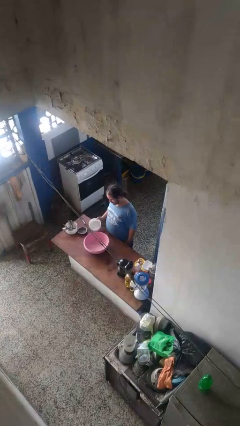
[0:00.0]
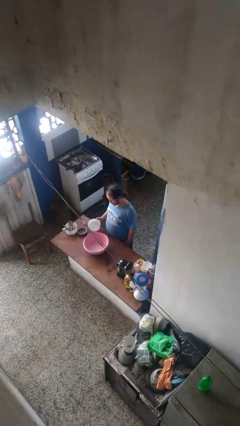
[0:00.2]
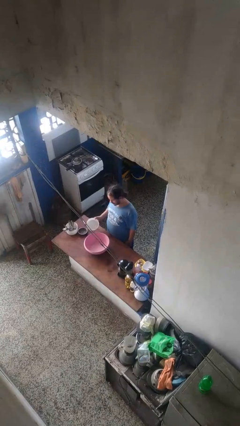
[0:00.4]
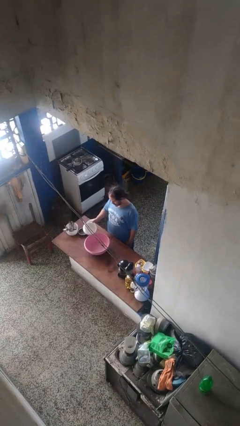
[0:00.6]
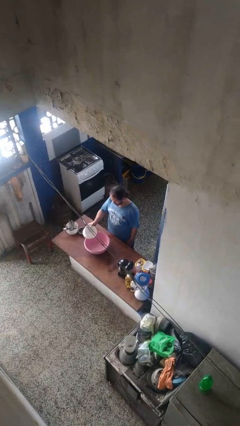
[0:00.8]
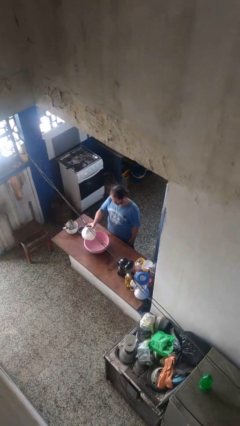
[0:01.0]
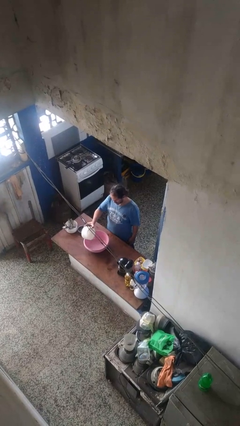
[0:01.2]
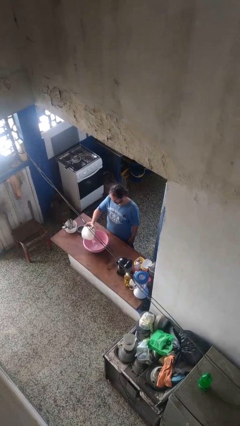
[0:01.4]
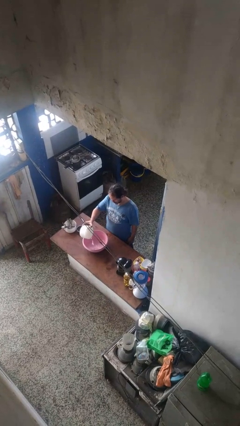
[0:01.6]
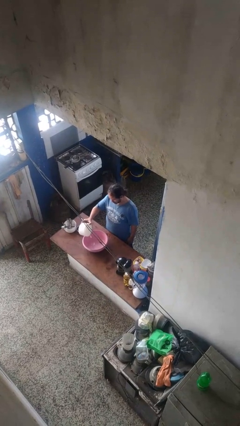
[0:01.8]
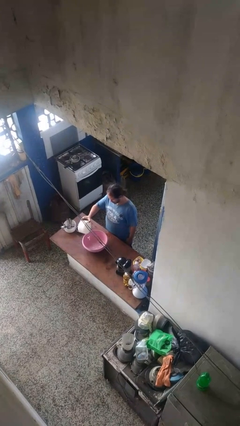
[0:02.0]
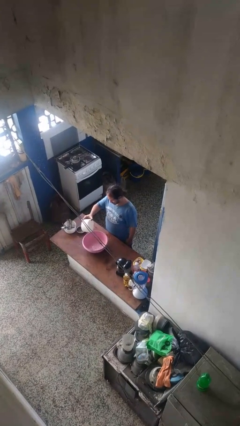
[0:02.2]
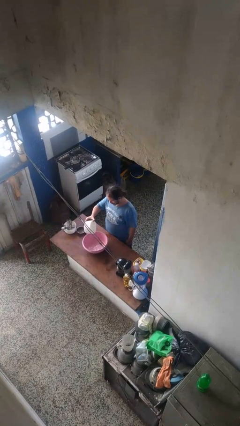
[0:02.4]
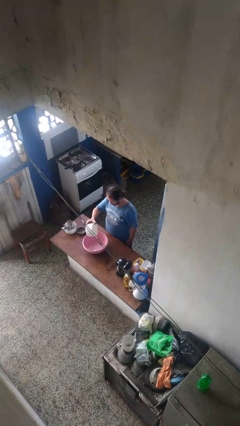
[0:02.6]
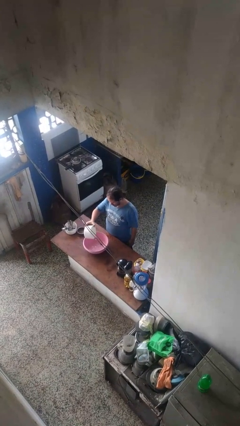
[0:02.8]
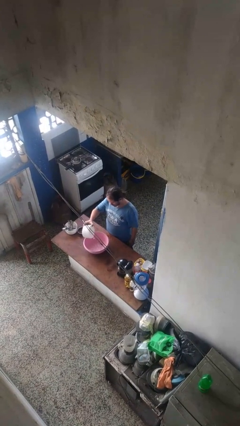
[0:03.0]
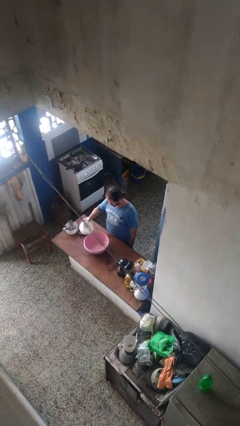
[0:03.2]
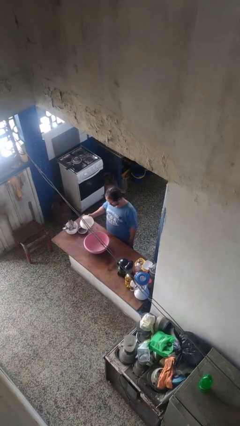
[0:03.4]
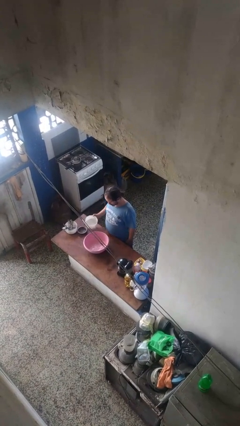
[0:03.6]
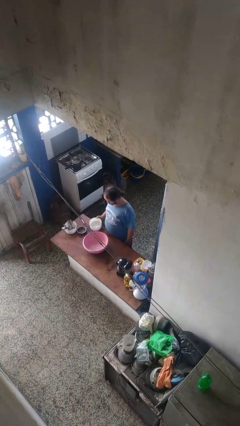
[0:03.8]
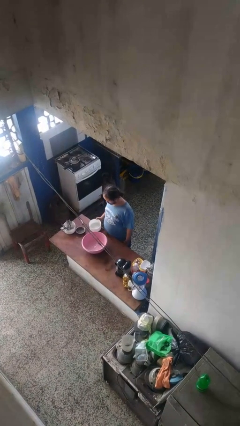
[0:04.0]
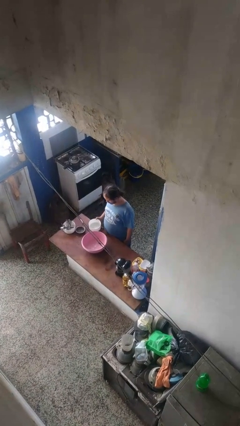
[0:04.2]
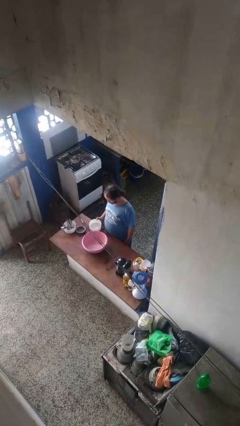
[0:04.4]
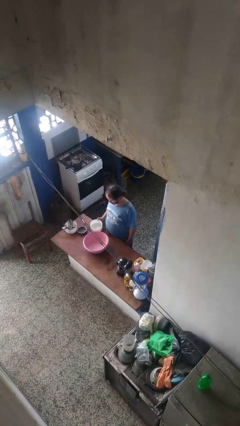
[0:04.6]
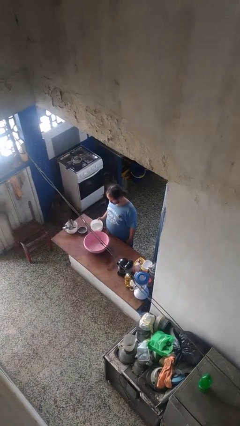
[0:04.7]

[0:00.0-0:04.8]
person pours into bowl

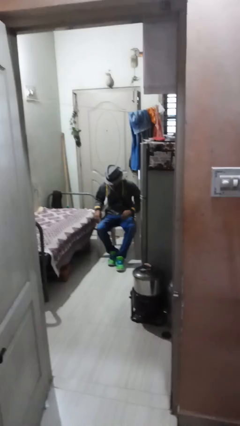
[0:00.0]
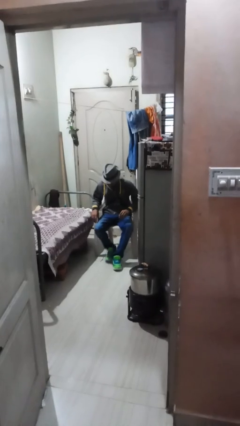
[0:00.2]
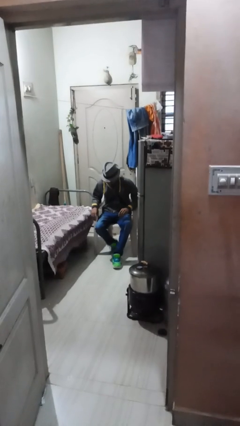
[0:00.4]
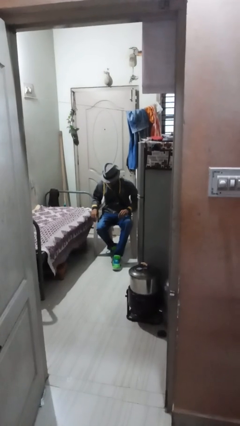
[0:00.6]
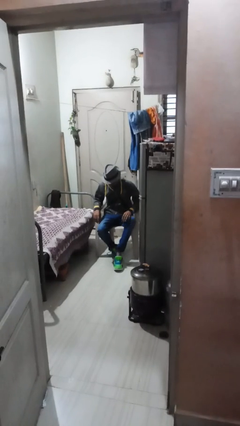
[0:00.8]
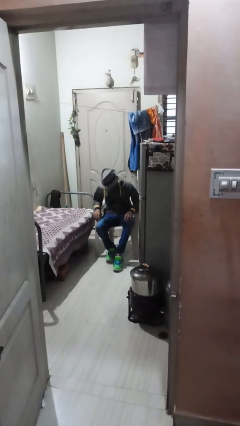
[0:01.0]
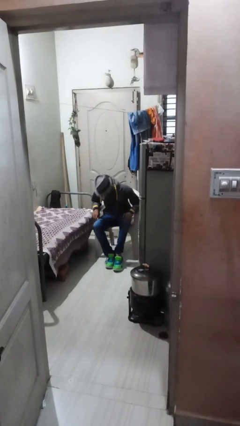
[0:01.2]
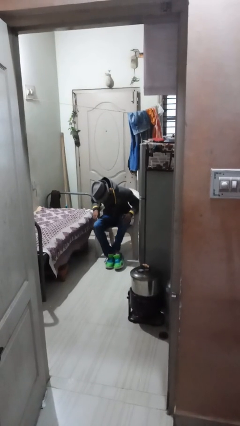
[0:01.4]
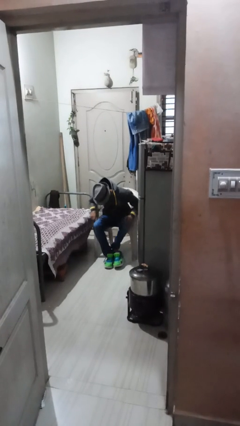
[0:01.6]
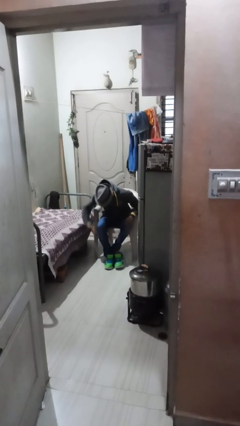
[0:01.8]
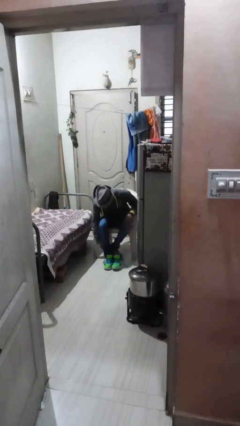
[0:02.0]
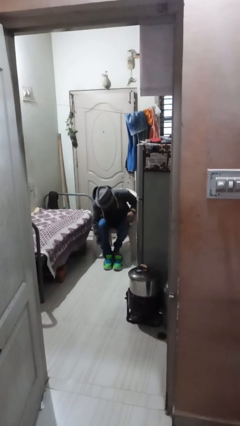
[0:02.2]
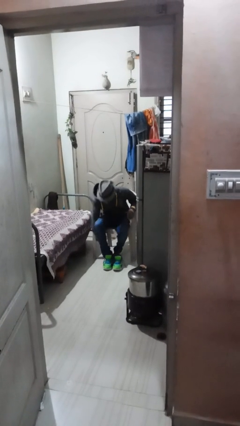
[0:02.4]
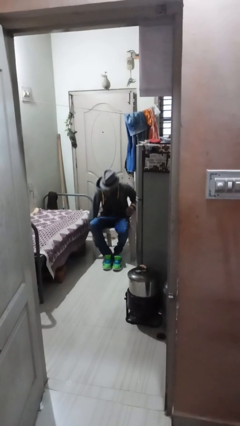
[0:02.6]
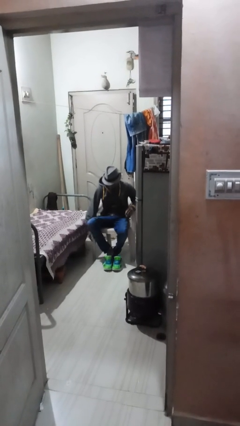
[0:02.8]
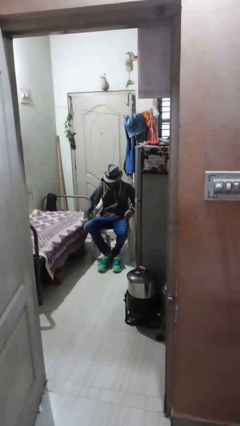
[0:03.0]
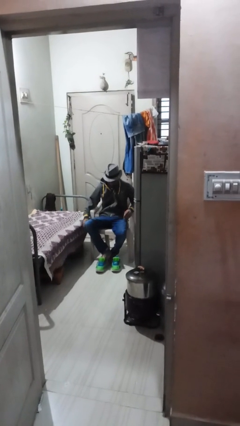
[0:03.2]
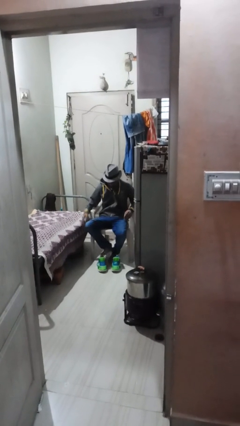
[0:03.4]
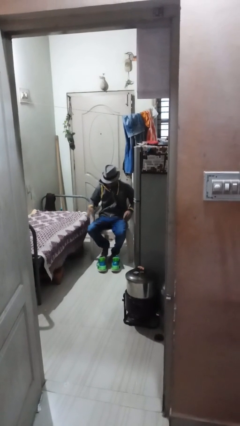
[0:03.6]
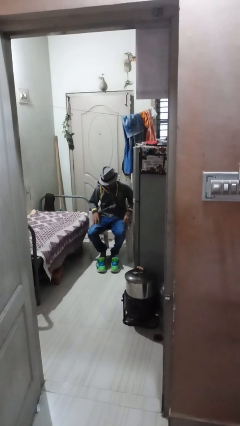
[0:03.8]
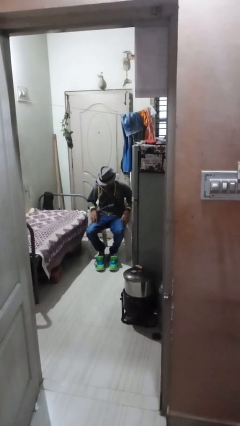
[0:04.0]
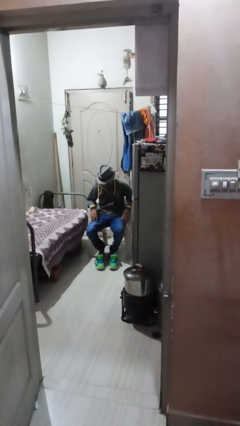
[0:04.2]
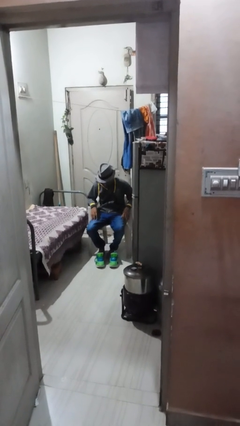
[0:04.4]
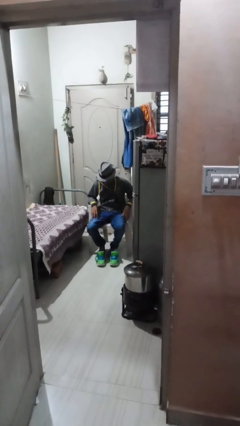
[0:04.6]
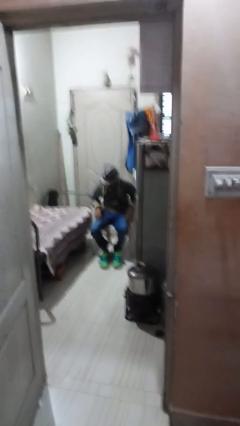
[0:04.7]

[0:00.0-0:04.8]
person takes off shoes

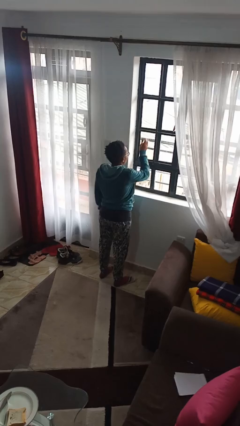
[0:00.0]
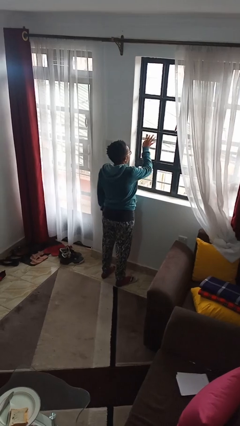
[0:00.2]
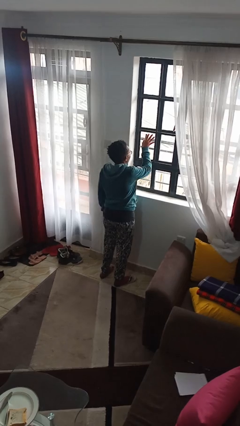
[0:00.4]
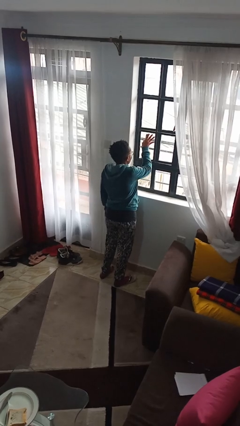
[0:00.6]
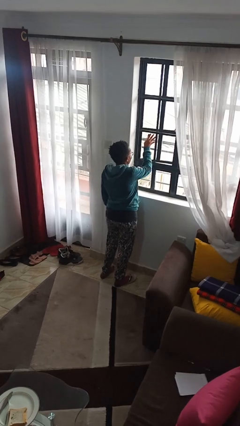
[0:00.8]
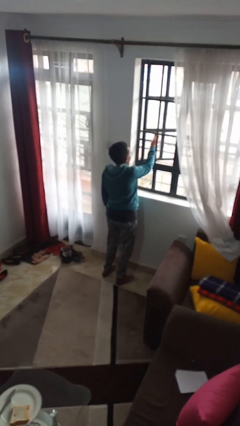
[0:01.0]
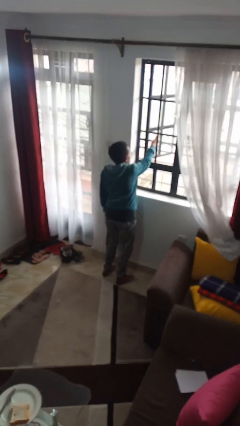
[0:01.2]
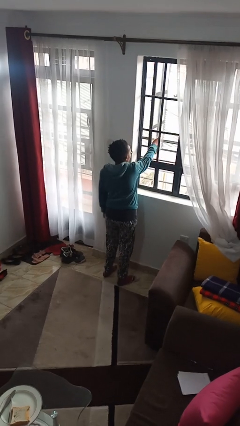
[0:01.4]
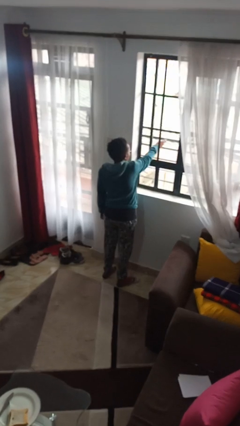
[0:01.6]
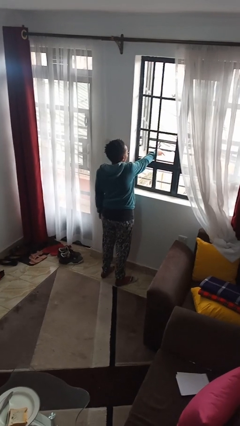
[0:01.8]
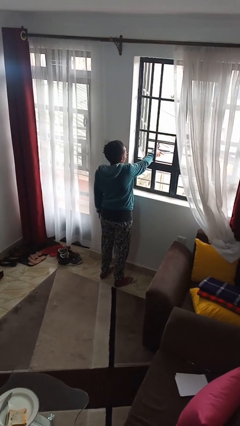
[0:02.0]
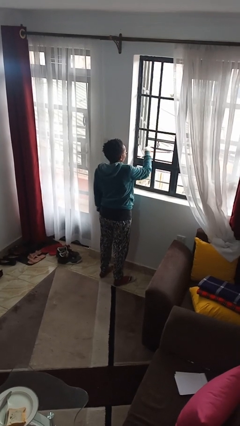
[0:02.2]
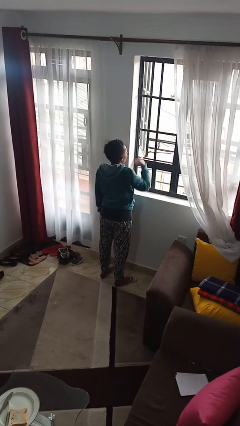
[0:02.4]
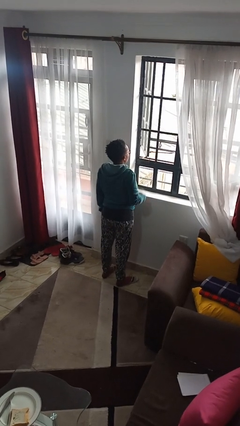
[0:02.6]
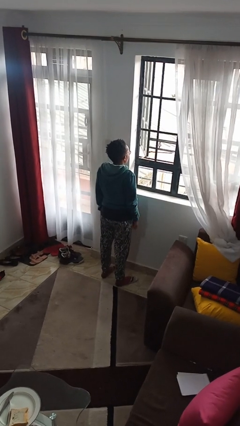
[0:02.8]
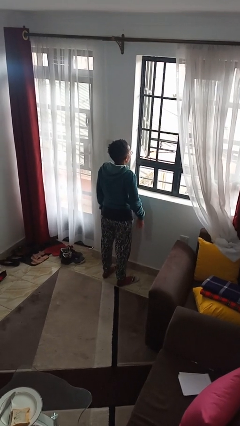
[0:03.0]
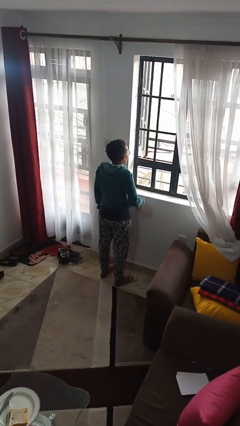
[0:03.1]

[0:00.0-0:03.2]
person opens home window

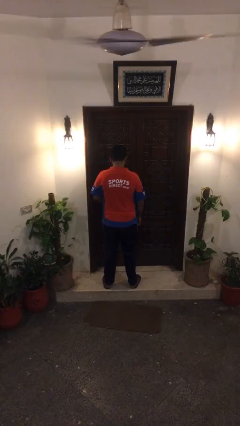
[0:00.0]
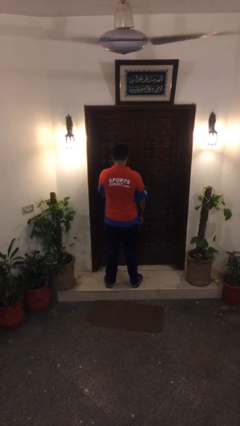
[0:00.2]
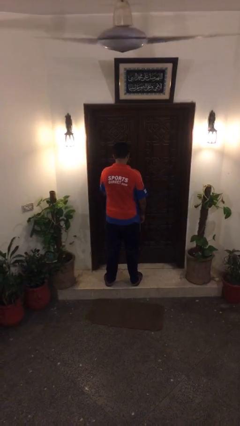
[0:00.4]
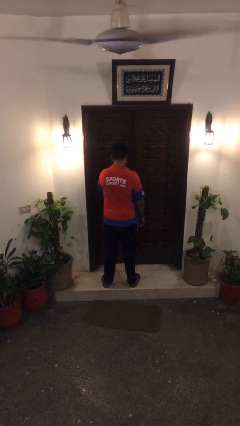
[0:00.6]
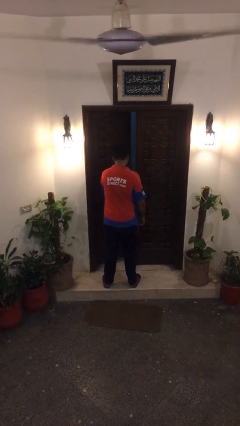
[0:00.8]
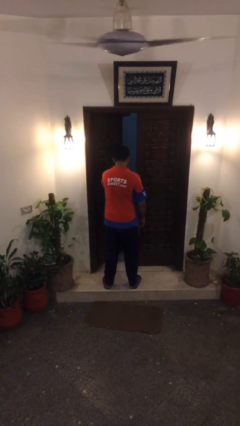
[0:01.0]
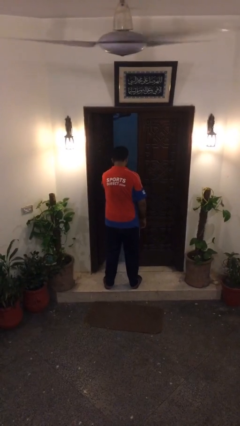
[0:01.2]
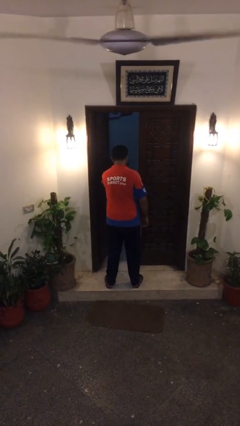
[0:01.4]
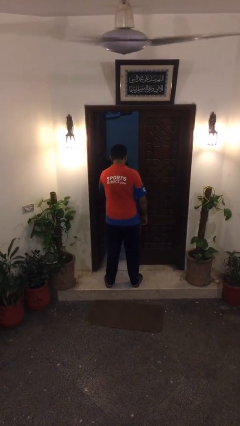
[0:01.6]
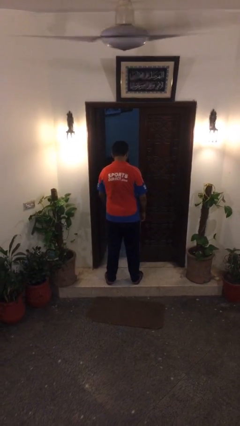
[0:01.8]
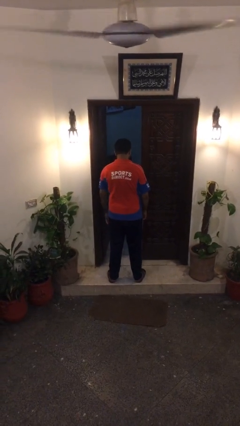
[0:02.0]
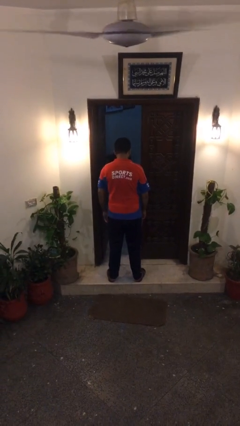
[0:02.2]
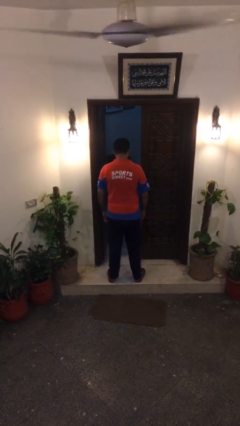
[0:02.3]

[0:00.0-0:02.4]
person opens facility door

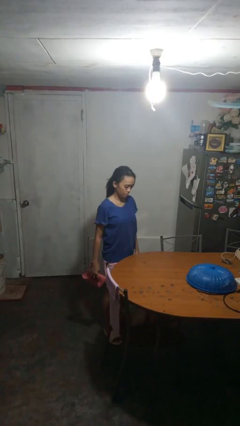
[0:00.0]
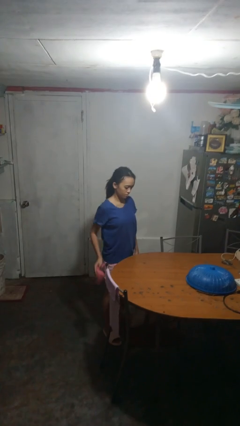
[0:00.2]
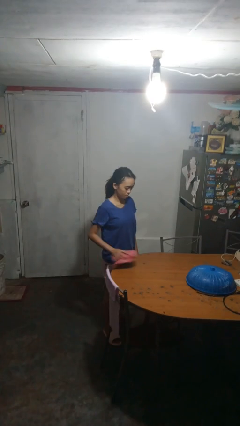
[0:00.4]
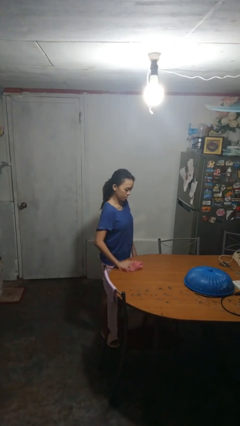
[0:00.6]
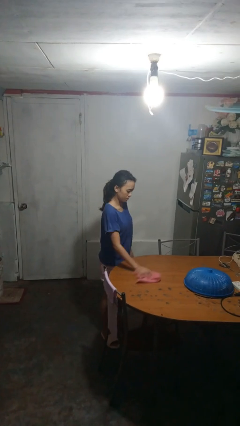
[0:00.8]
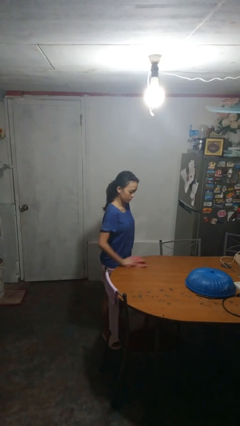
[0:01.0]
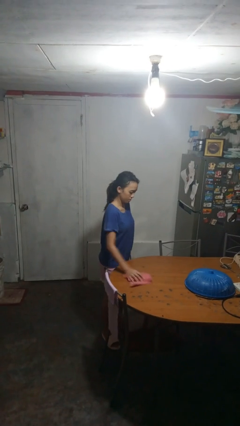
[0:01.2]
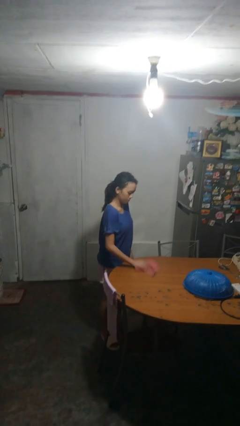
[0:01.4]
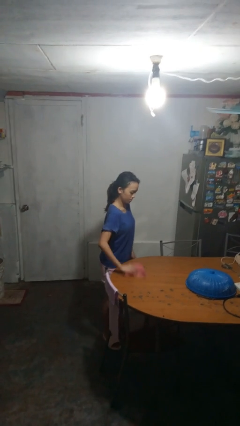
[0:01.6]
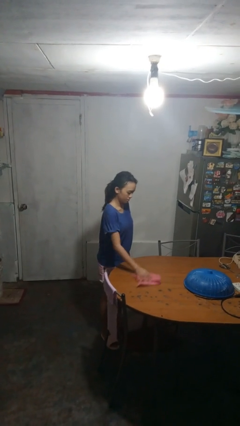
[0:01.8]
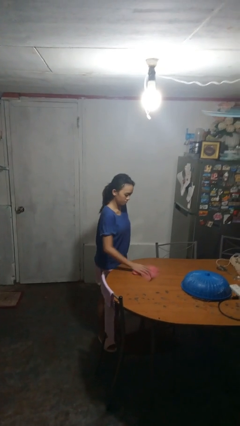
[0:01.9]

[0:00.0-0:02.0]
person cleans table with rag
